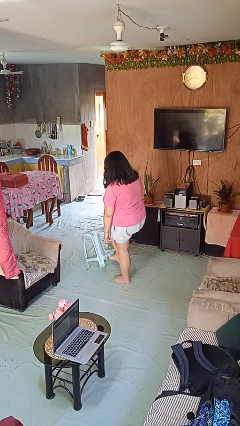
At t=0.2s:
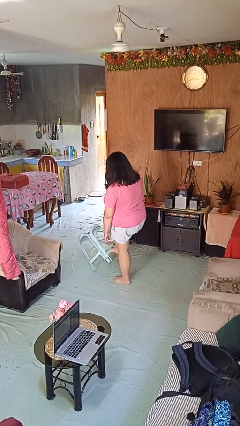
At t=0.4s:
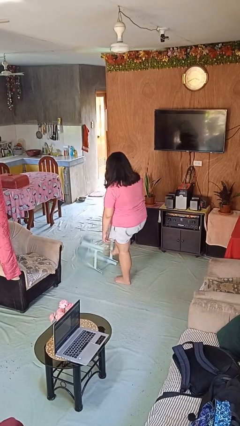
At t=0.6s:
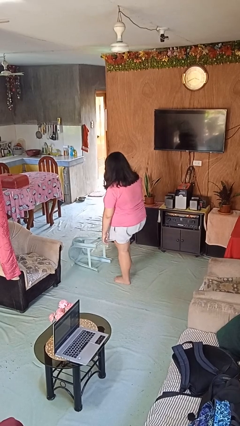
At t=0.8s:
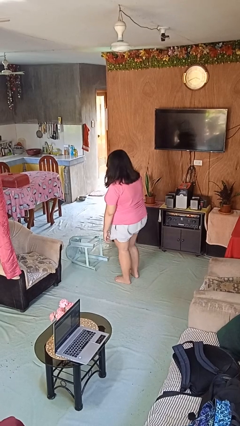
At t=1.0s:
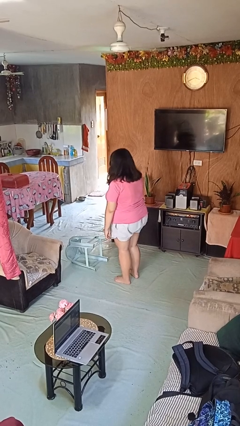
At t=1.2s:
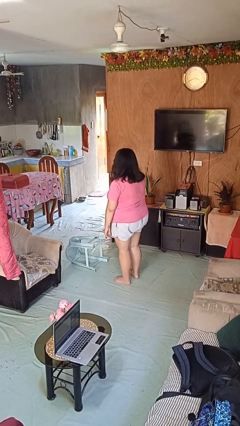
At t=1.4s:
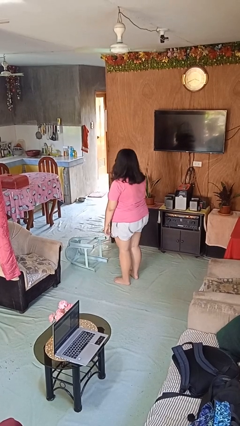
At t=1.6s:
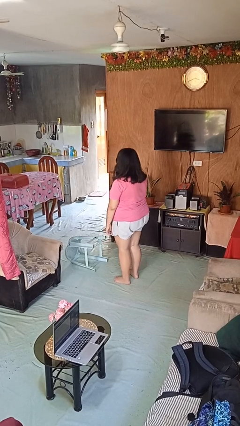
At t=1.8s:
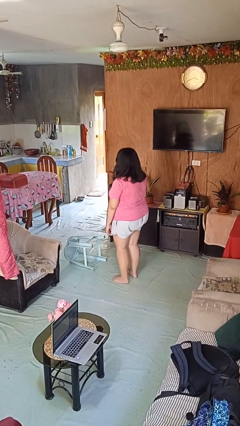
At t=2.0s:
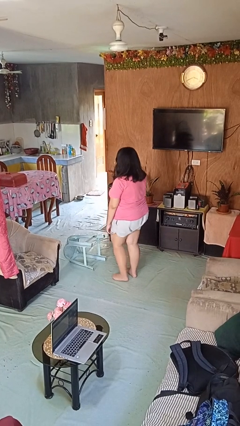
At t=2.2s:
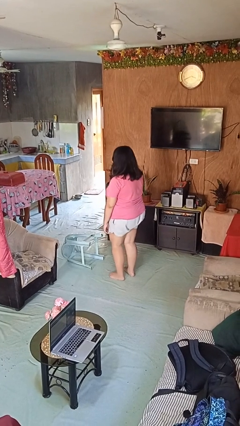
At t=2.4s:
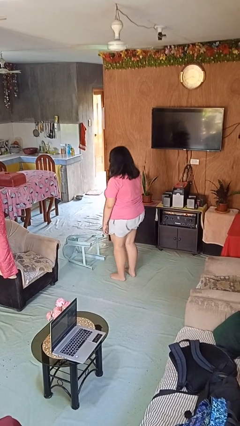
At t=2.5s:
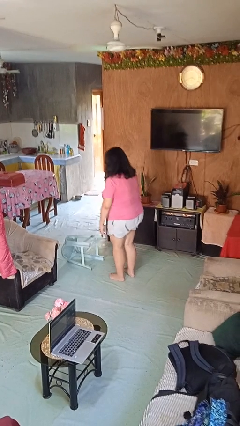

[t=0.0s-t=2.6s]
person knocks over furniture

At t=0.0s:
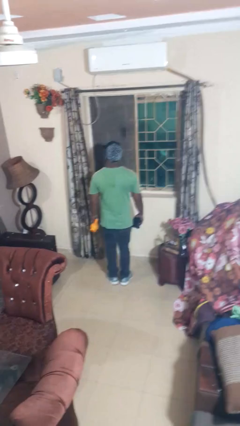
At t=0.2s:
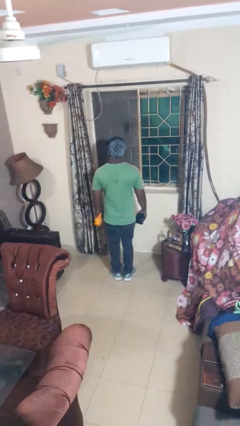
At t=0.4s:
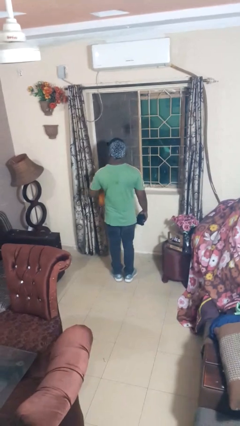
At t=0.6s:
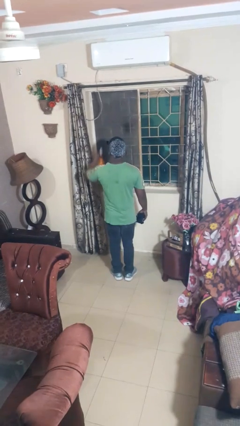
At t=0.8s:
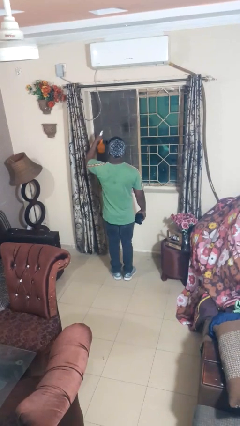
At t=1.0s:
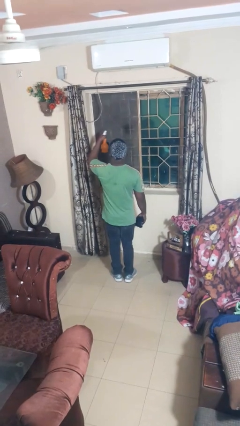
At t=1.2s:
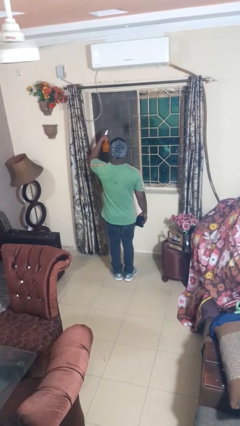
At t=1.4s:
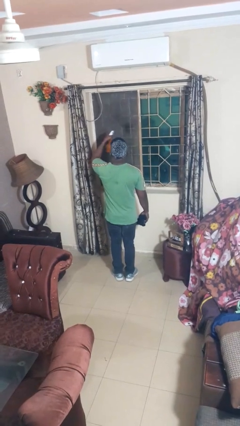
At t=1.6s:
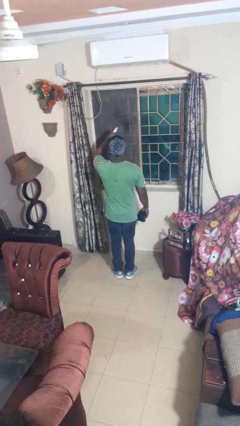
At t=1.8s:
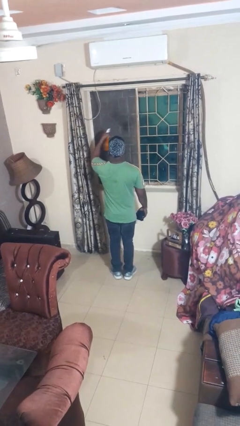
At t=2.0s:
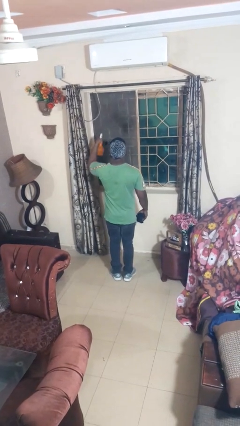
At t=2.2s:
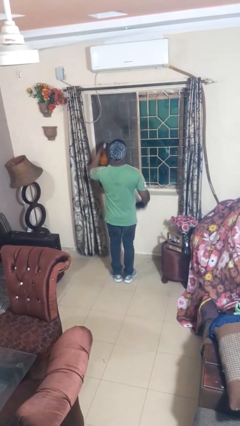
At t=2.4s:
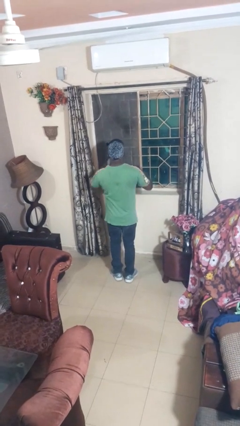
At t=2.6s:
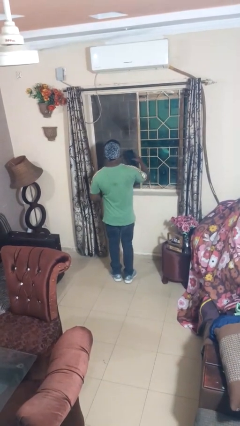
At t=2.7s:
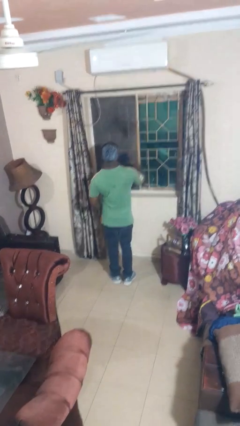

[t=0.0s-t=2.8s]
person sprays from bottle

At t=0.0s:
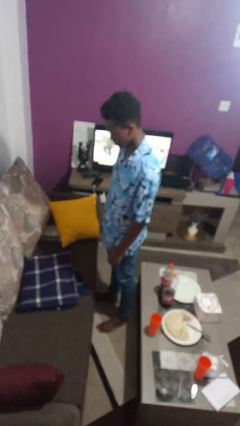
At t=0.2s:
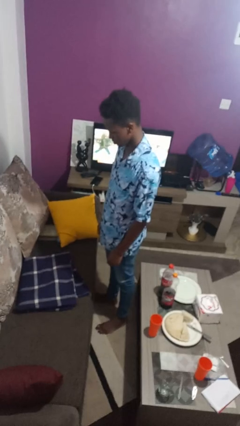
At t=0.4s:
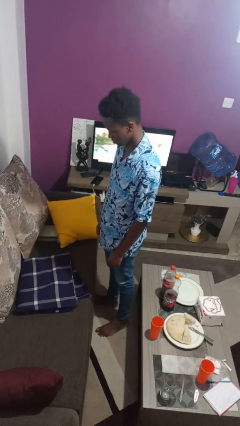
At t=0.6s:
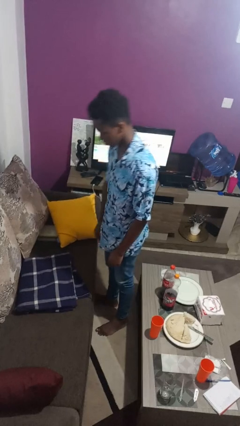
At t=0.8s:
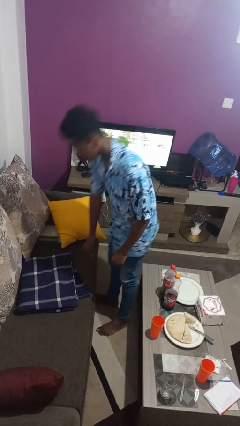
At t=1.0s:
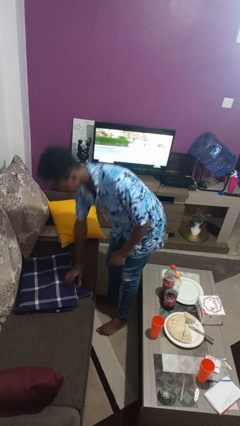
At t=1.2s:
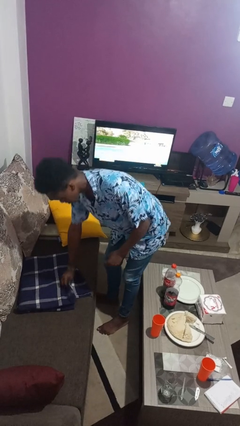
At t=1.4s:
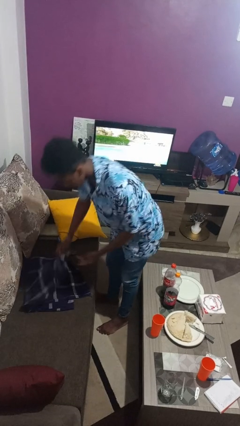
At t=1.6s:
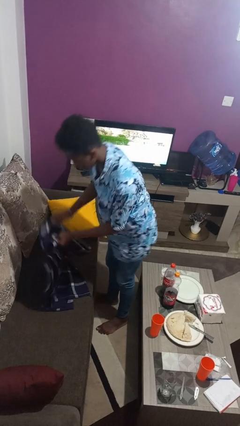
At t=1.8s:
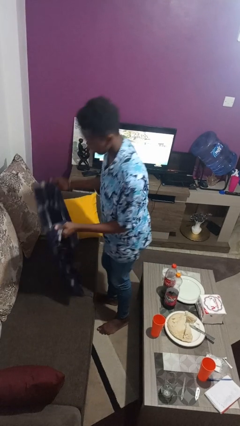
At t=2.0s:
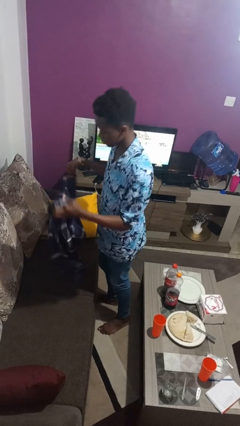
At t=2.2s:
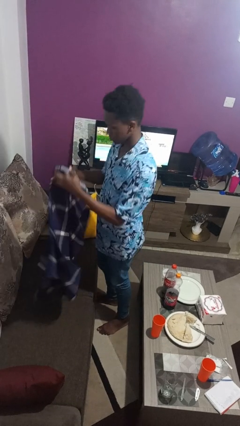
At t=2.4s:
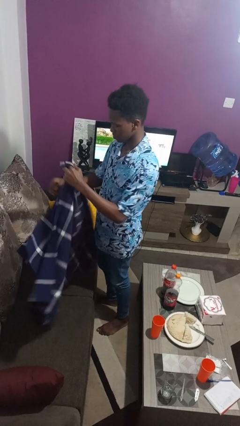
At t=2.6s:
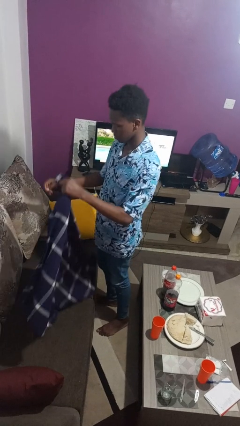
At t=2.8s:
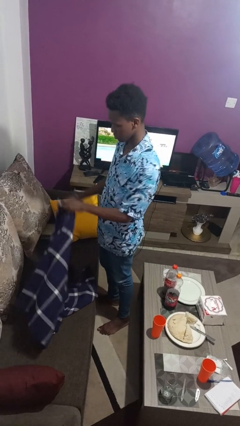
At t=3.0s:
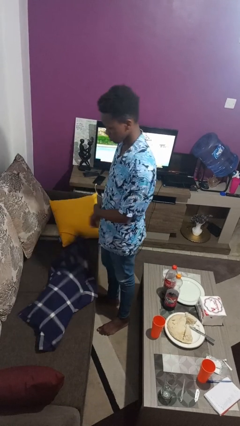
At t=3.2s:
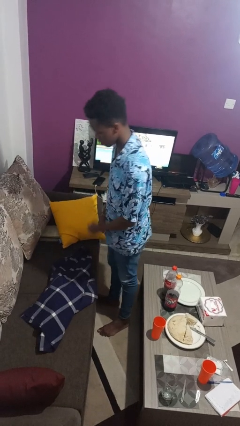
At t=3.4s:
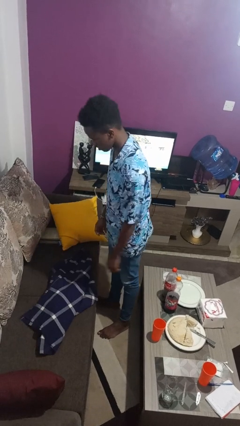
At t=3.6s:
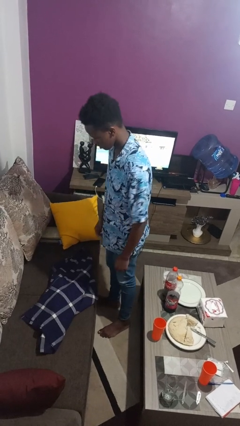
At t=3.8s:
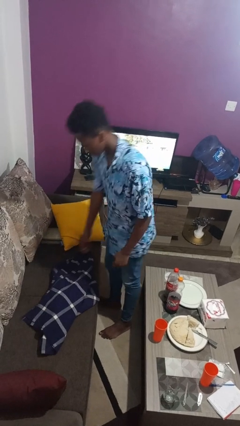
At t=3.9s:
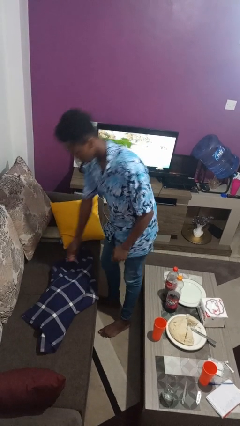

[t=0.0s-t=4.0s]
person unfolds blanket

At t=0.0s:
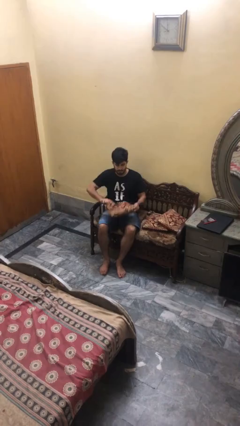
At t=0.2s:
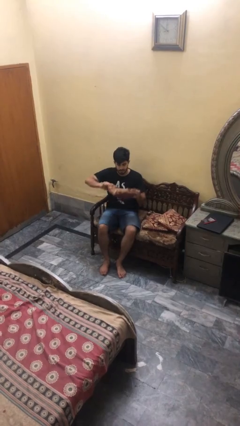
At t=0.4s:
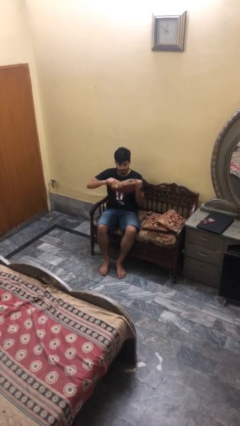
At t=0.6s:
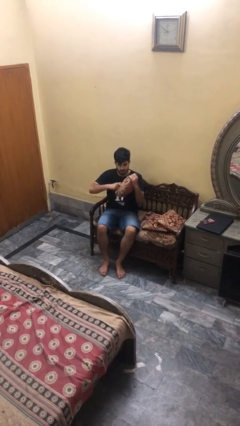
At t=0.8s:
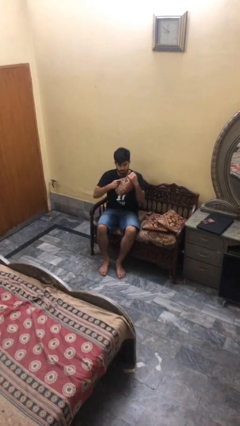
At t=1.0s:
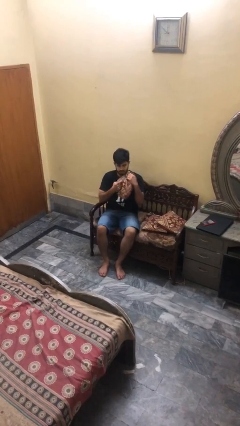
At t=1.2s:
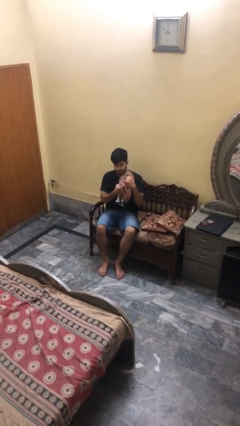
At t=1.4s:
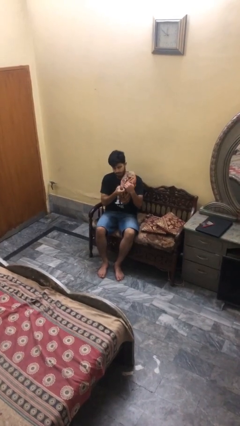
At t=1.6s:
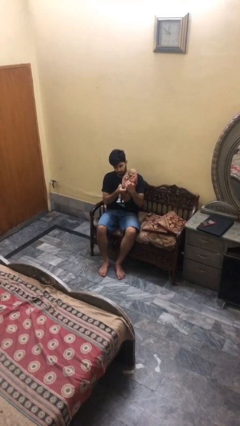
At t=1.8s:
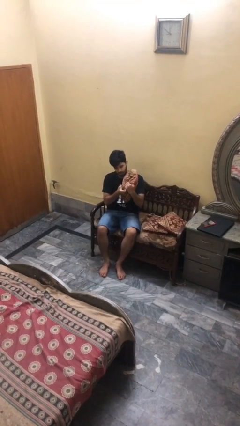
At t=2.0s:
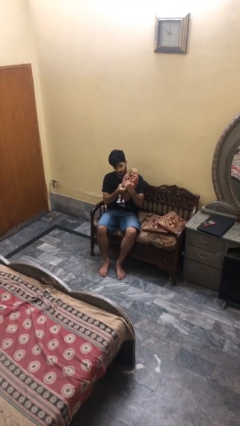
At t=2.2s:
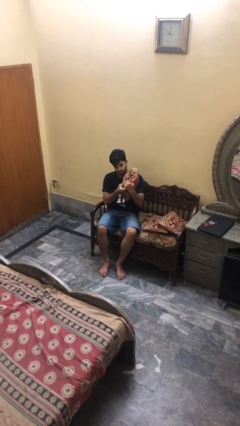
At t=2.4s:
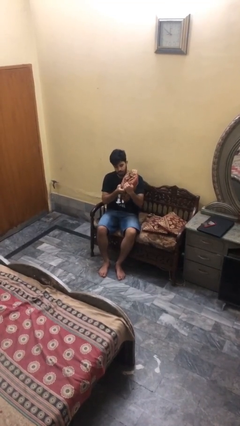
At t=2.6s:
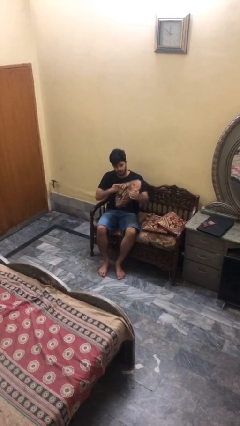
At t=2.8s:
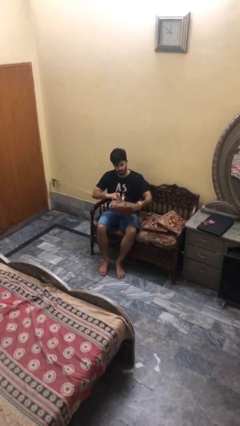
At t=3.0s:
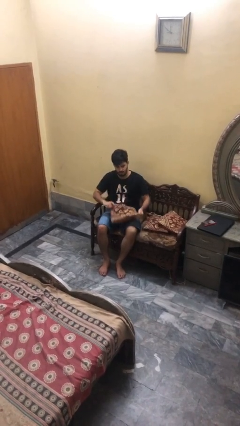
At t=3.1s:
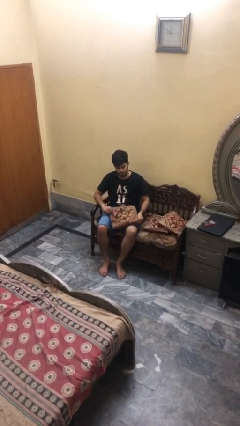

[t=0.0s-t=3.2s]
person squeezes object

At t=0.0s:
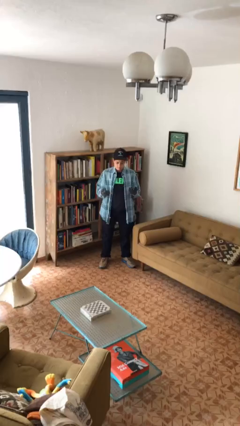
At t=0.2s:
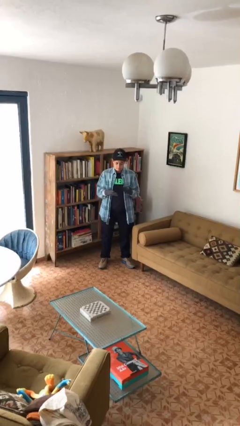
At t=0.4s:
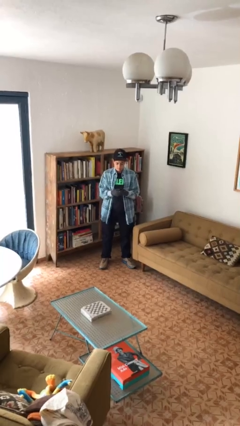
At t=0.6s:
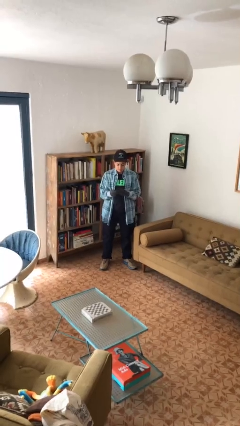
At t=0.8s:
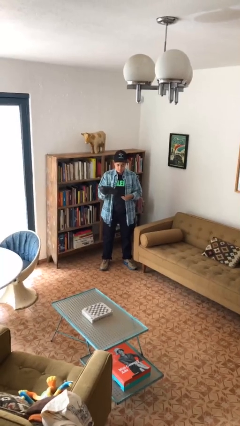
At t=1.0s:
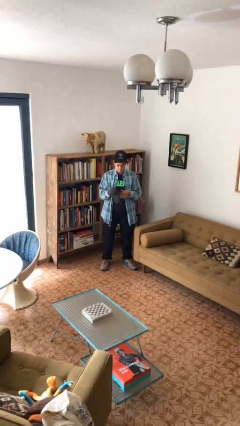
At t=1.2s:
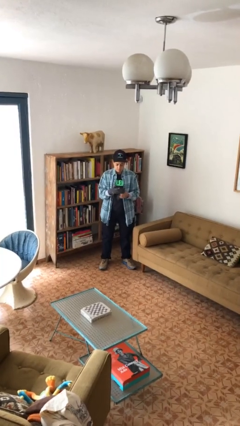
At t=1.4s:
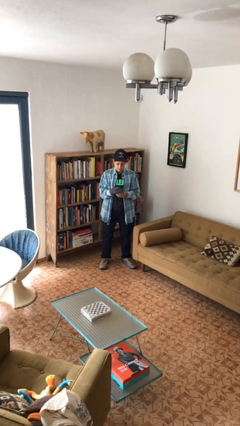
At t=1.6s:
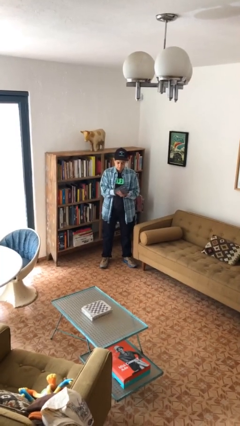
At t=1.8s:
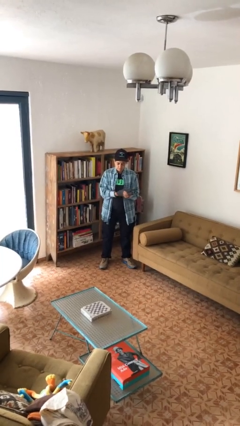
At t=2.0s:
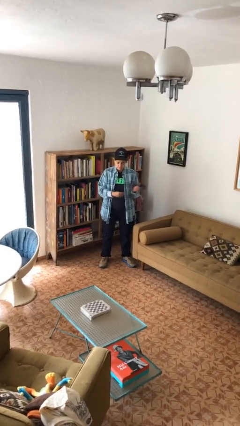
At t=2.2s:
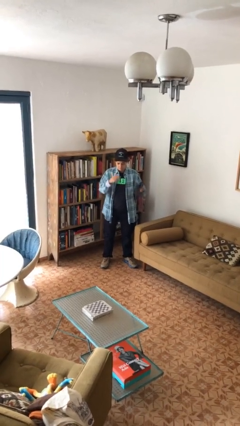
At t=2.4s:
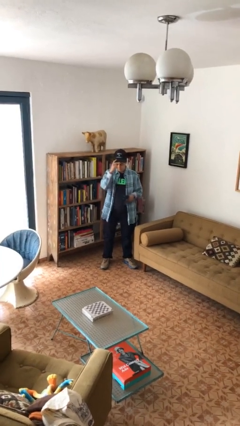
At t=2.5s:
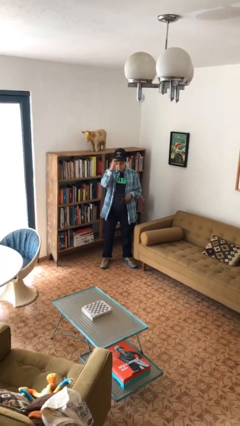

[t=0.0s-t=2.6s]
person takes off gloves

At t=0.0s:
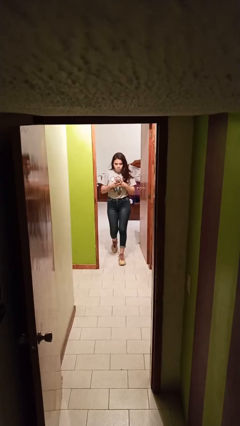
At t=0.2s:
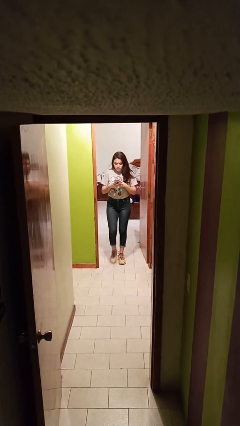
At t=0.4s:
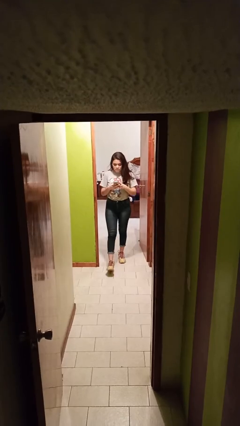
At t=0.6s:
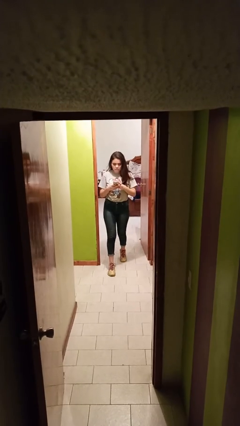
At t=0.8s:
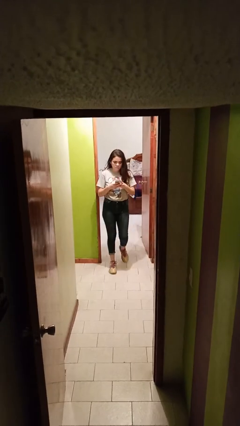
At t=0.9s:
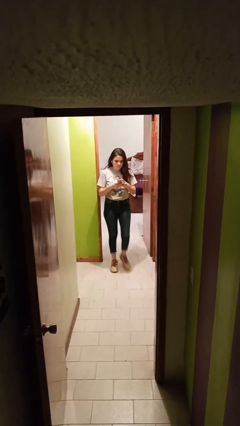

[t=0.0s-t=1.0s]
person enters scene through structure

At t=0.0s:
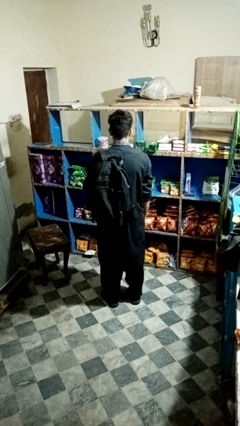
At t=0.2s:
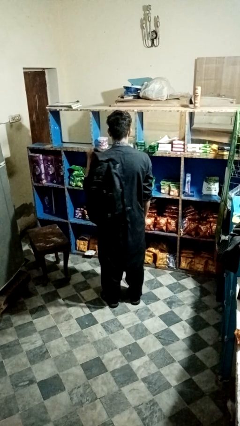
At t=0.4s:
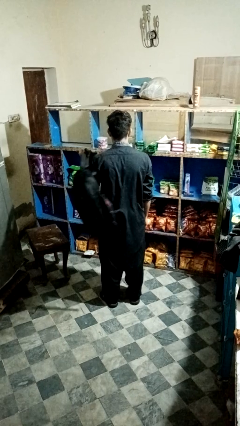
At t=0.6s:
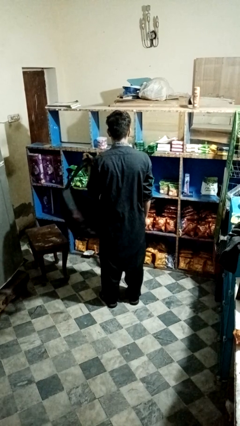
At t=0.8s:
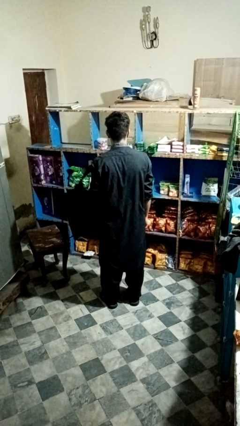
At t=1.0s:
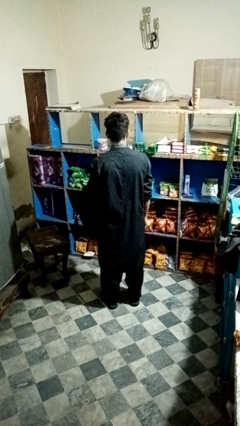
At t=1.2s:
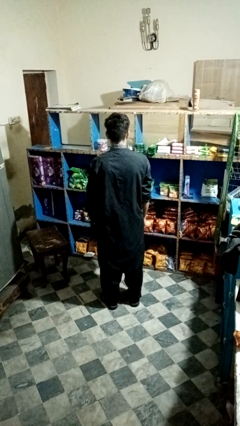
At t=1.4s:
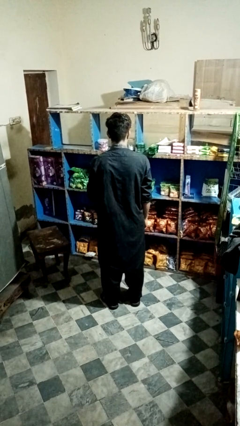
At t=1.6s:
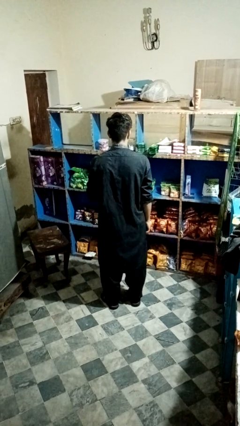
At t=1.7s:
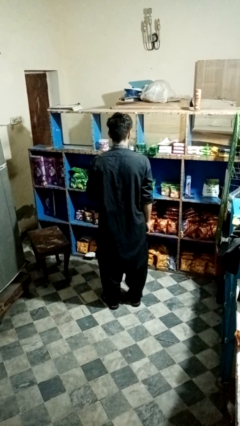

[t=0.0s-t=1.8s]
person takes off backpack
